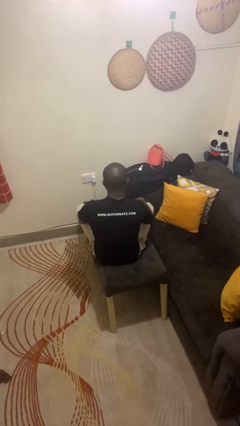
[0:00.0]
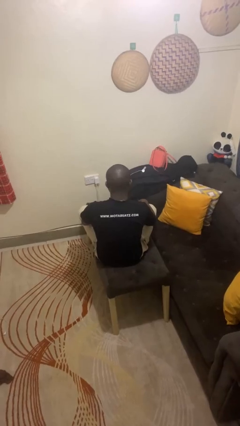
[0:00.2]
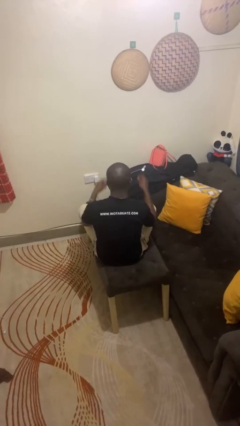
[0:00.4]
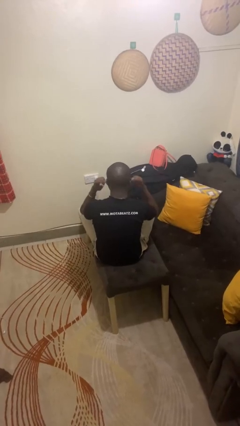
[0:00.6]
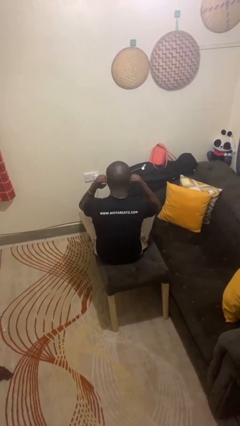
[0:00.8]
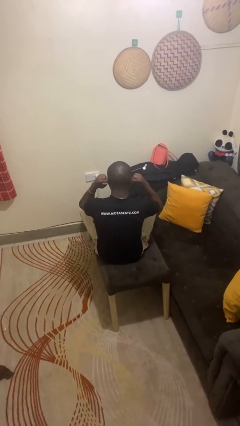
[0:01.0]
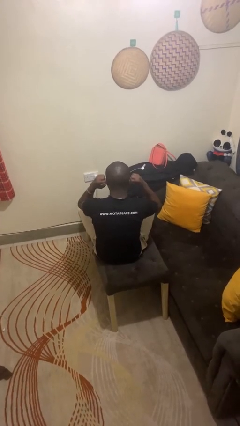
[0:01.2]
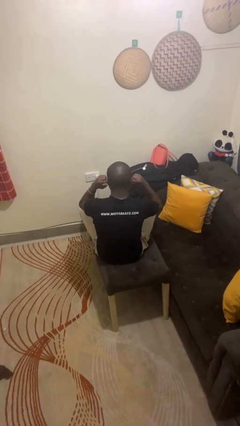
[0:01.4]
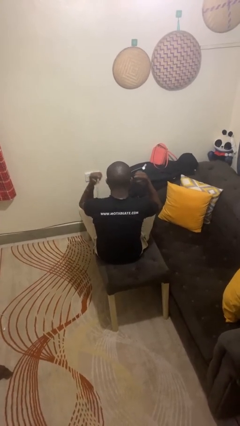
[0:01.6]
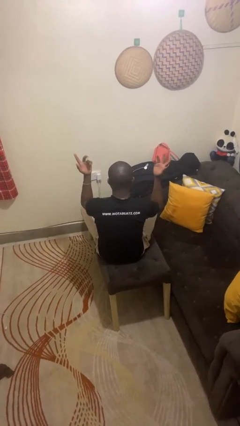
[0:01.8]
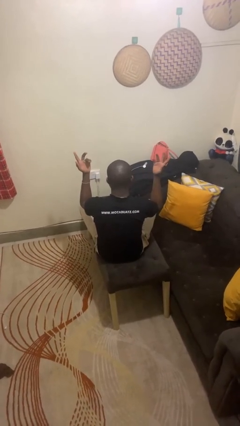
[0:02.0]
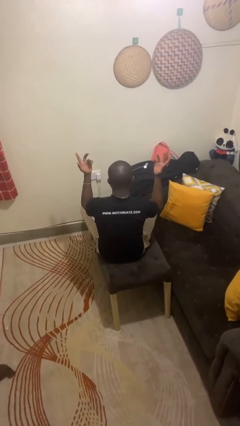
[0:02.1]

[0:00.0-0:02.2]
person puts fingers in ear

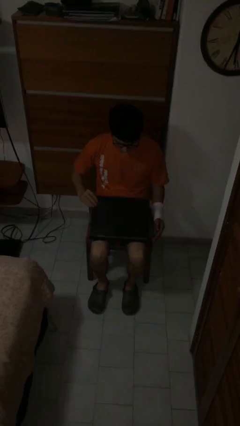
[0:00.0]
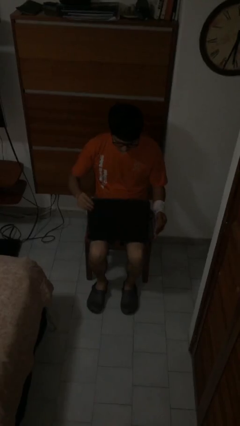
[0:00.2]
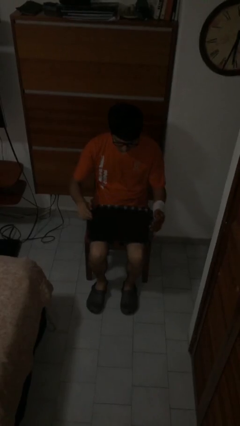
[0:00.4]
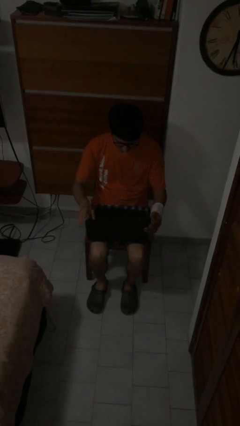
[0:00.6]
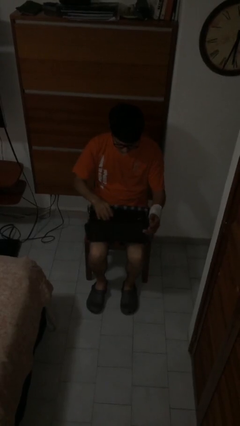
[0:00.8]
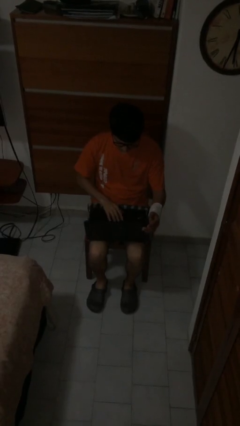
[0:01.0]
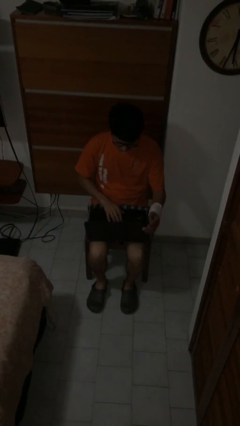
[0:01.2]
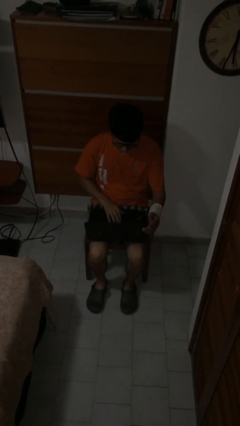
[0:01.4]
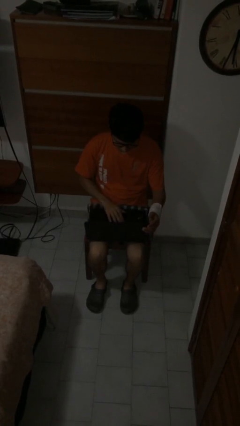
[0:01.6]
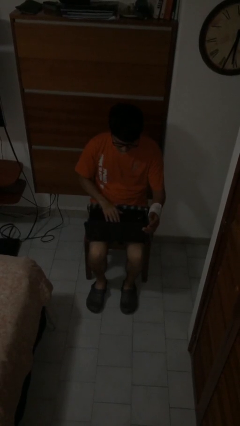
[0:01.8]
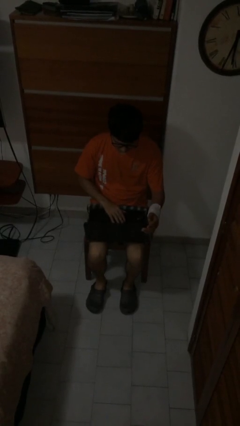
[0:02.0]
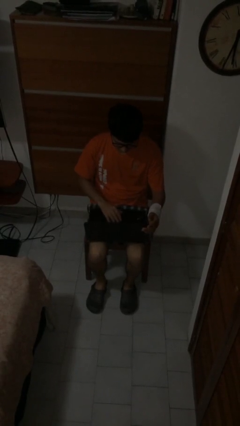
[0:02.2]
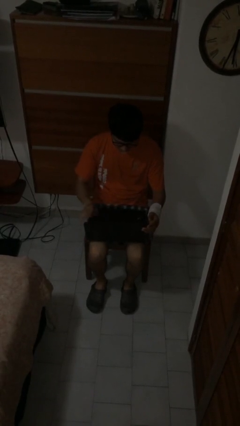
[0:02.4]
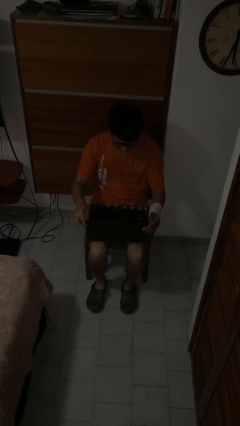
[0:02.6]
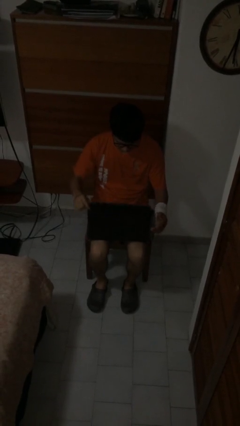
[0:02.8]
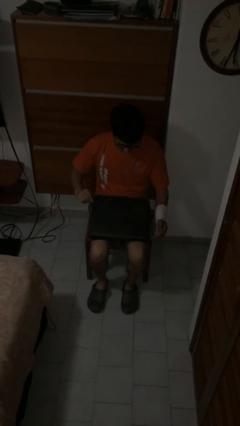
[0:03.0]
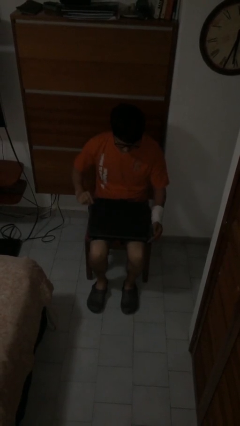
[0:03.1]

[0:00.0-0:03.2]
person interacts with laptop

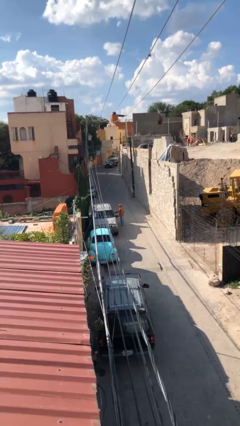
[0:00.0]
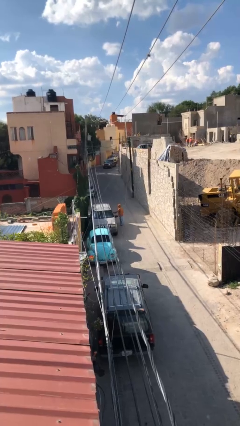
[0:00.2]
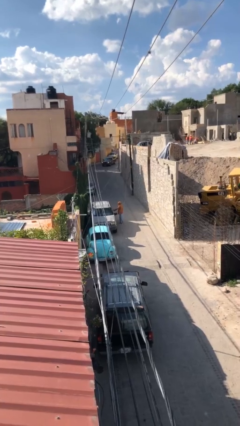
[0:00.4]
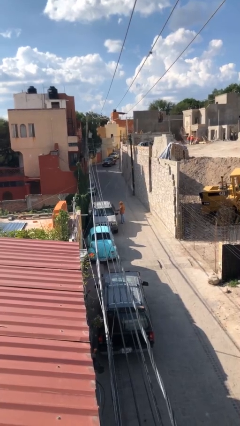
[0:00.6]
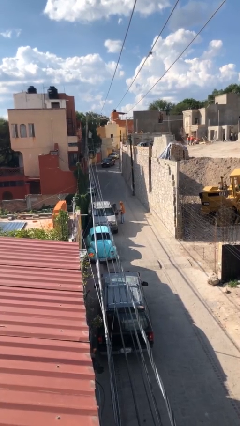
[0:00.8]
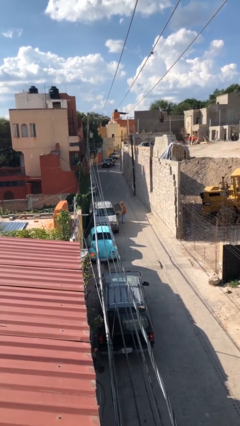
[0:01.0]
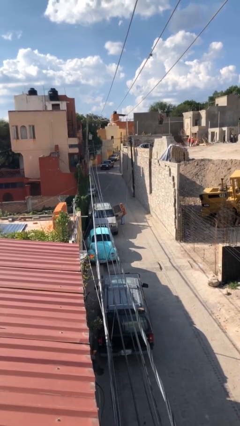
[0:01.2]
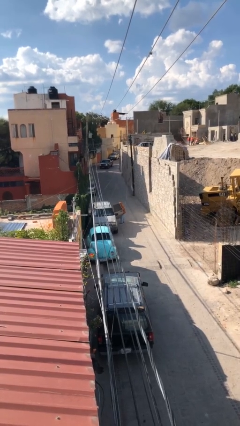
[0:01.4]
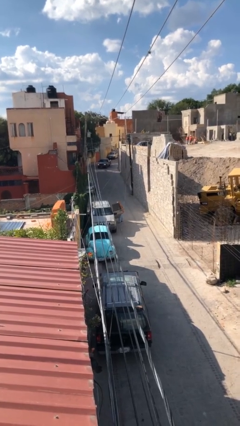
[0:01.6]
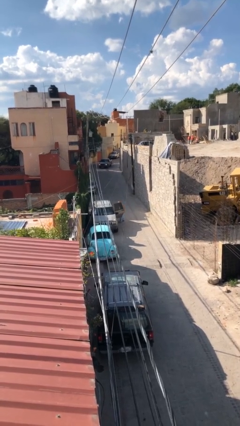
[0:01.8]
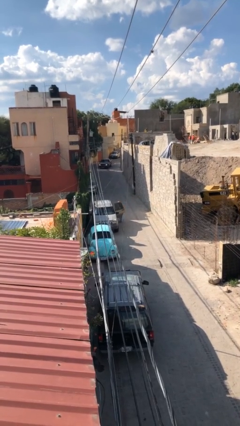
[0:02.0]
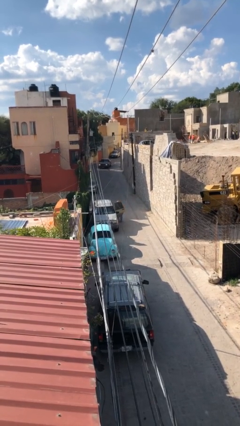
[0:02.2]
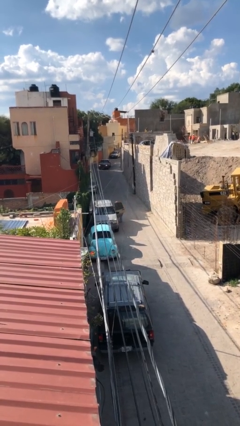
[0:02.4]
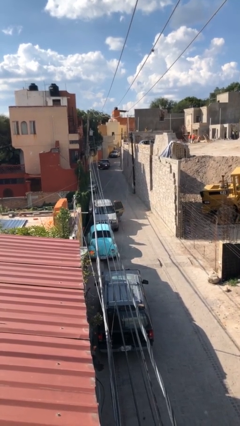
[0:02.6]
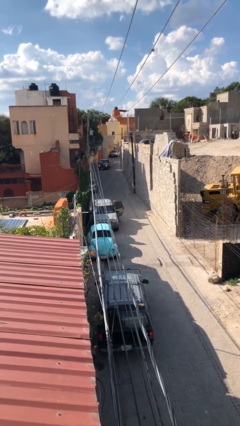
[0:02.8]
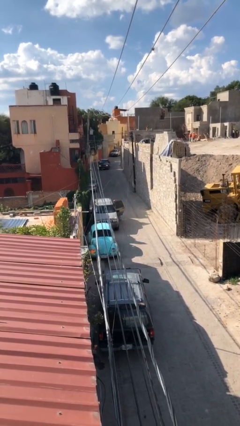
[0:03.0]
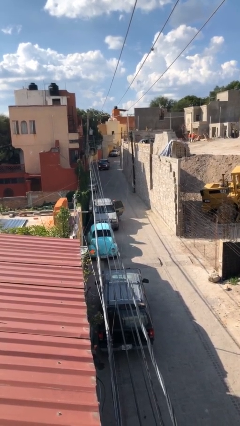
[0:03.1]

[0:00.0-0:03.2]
person opens car door

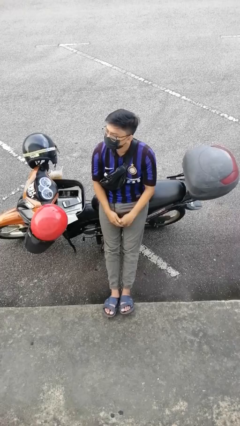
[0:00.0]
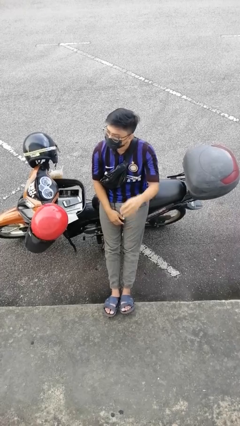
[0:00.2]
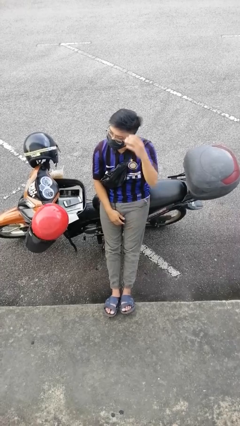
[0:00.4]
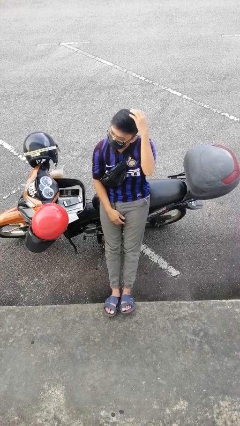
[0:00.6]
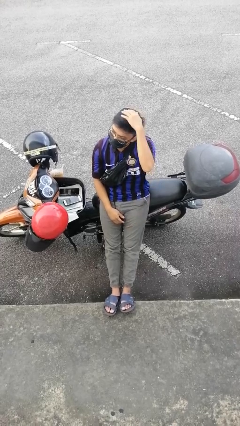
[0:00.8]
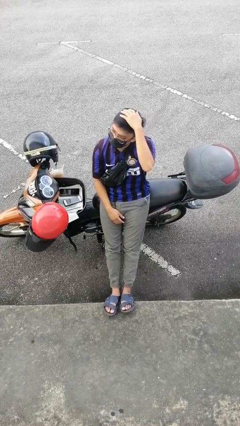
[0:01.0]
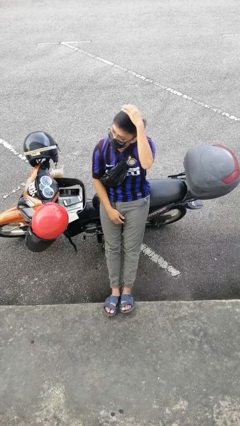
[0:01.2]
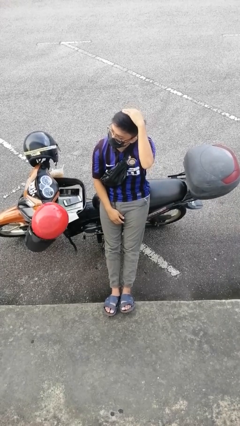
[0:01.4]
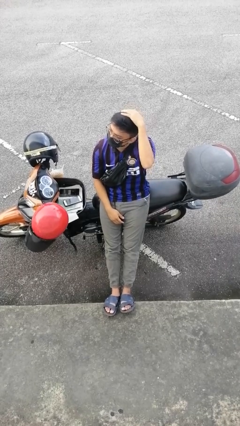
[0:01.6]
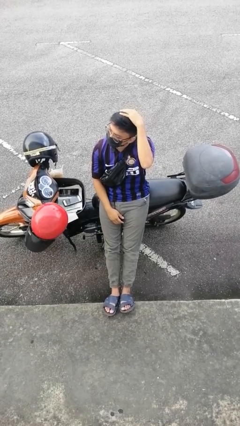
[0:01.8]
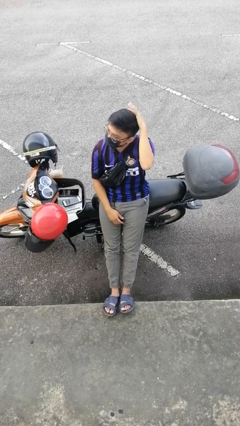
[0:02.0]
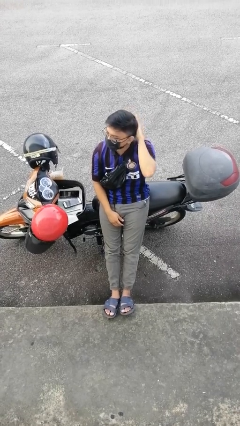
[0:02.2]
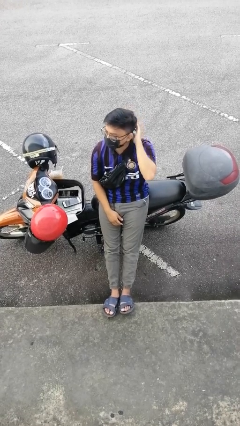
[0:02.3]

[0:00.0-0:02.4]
person pats head

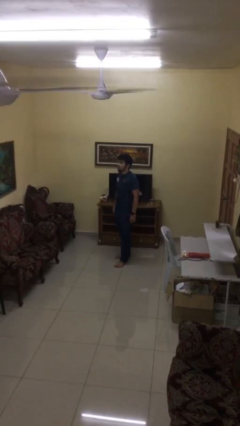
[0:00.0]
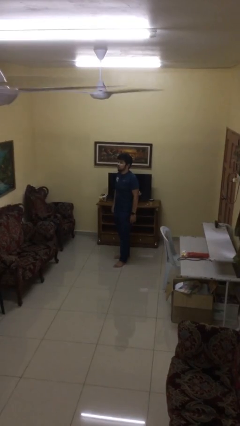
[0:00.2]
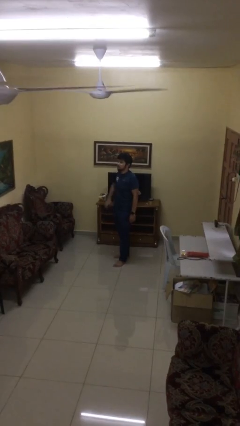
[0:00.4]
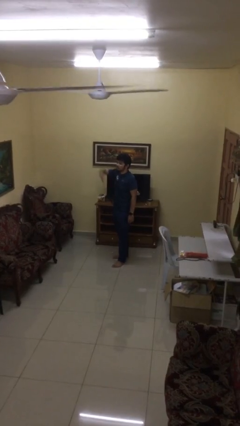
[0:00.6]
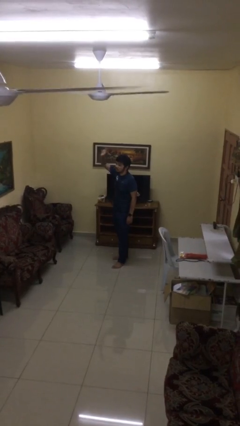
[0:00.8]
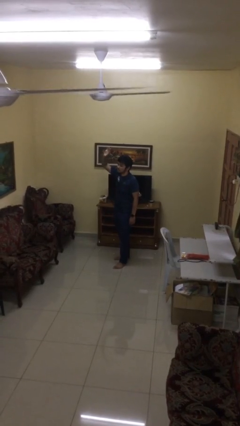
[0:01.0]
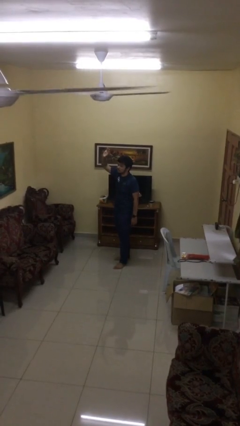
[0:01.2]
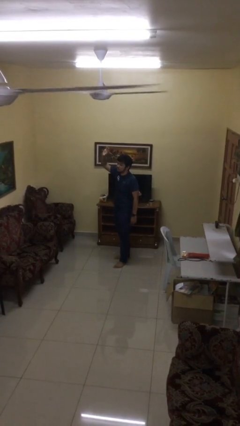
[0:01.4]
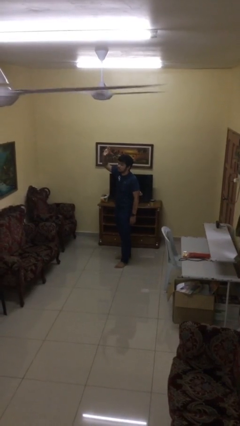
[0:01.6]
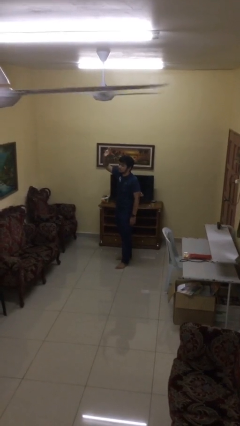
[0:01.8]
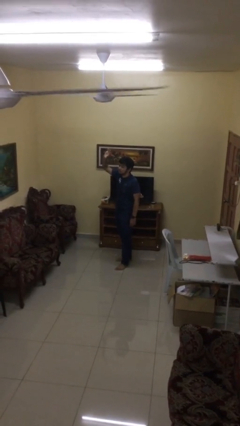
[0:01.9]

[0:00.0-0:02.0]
person gestures swipe up

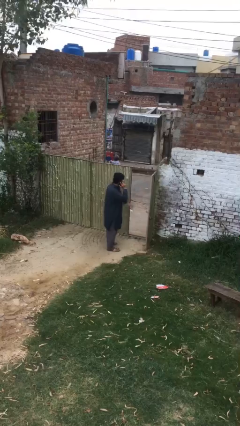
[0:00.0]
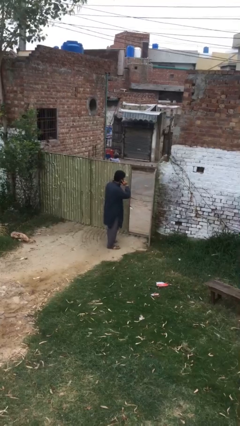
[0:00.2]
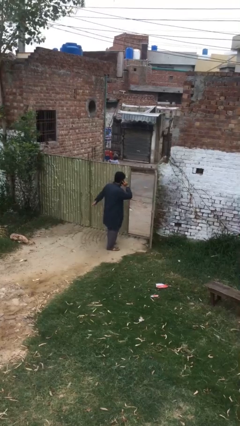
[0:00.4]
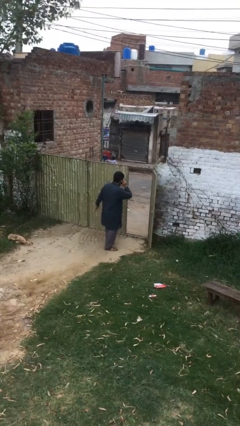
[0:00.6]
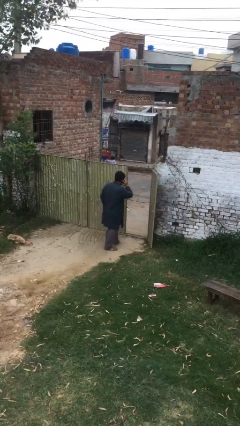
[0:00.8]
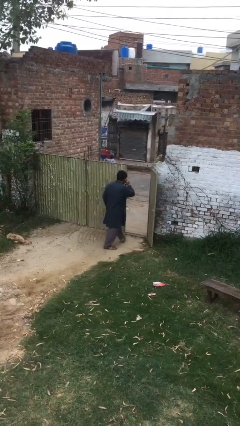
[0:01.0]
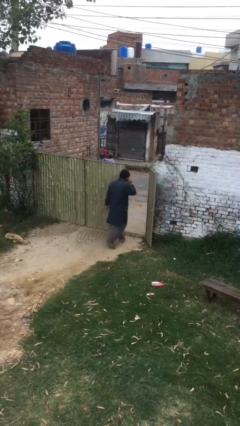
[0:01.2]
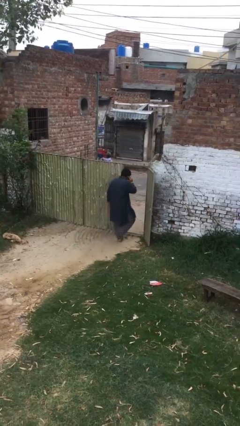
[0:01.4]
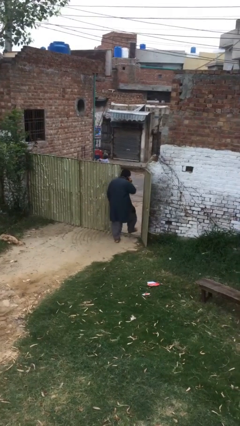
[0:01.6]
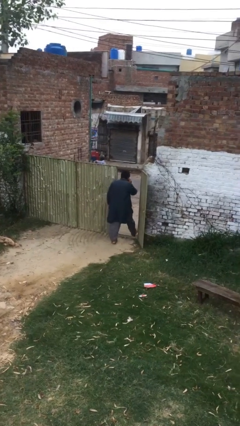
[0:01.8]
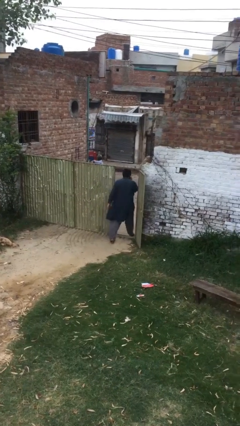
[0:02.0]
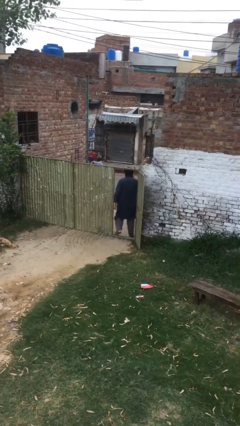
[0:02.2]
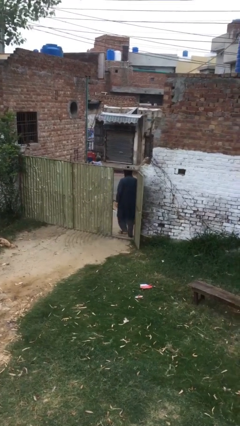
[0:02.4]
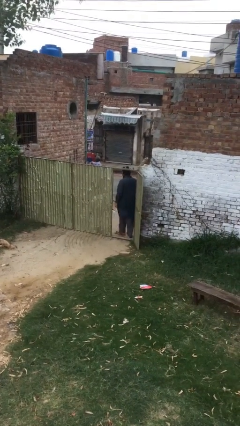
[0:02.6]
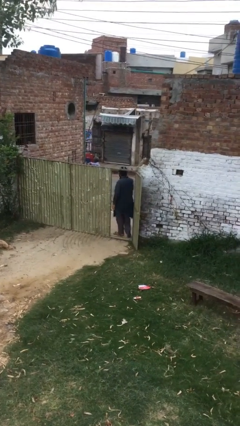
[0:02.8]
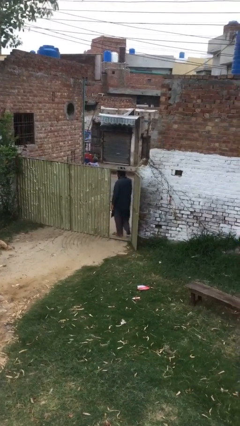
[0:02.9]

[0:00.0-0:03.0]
person exits scene through structure

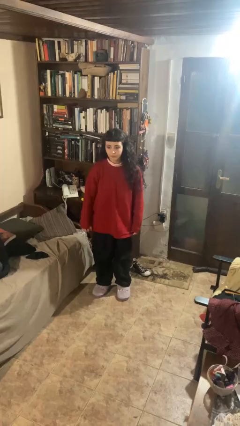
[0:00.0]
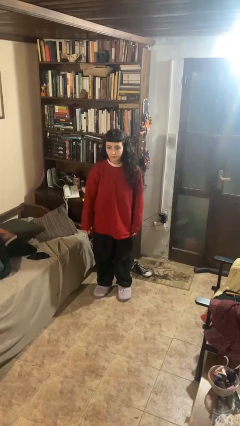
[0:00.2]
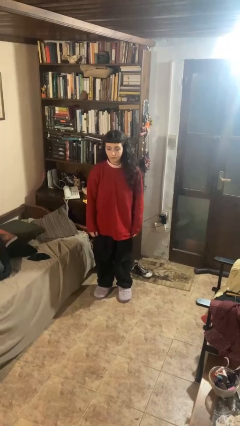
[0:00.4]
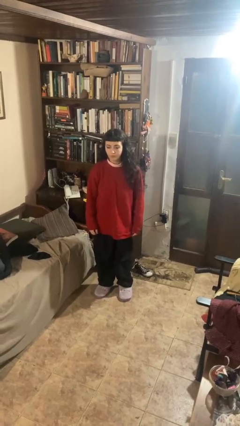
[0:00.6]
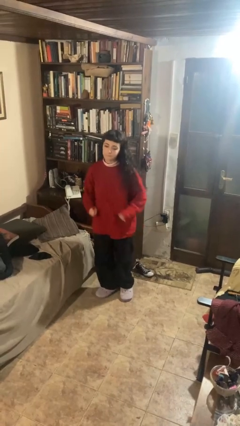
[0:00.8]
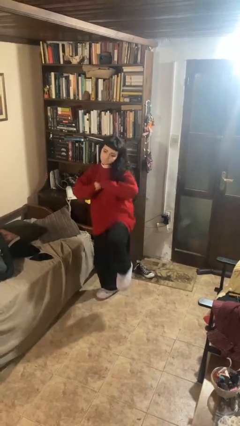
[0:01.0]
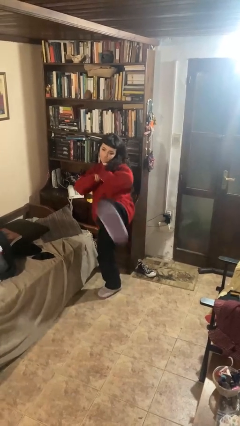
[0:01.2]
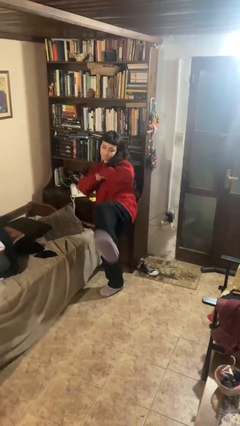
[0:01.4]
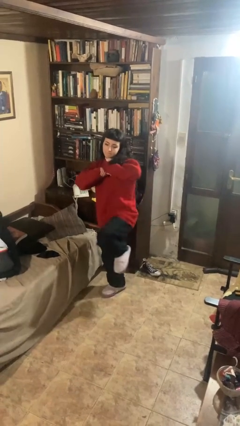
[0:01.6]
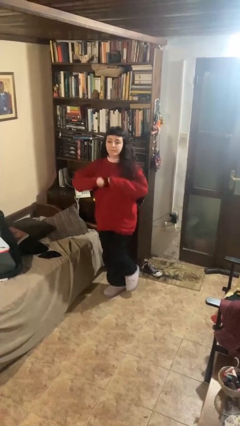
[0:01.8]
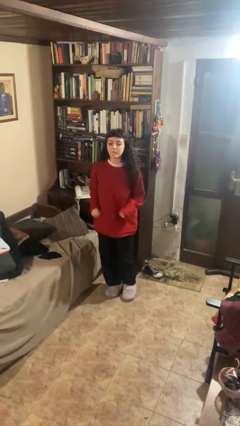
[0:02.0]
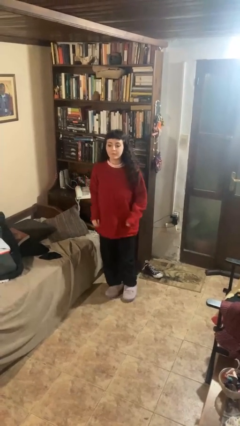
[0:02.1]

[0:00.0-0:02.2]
person karate kicks
